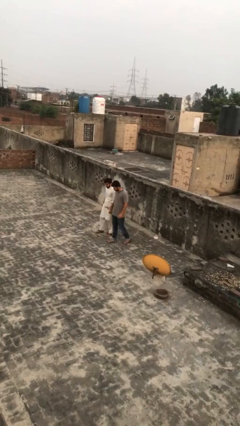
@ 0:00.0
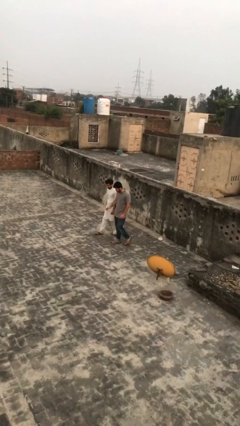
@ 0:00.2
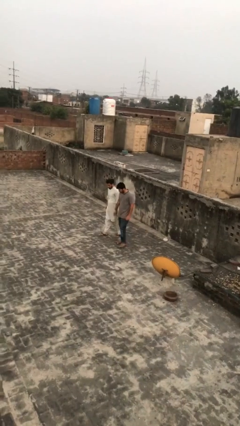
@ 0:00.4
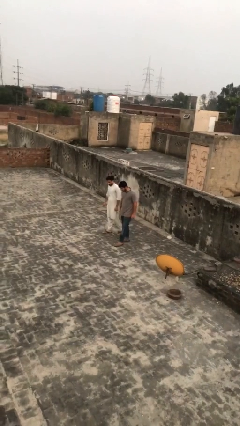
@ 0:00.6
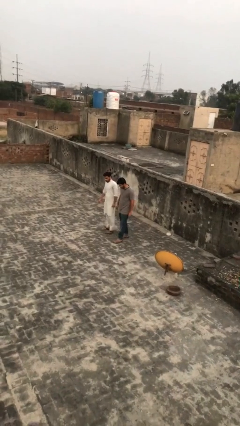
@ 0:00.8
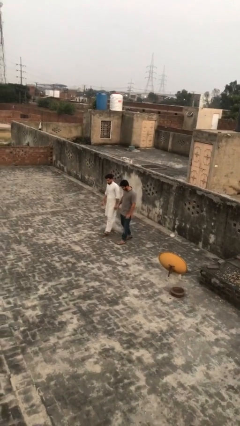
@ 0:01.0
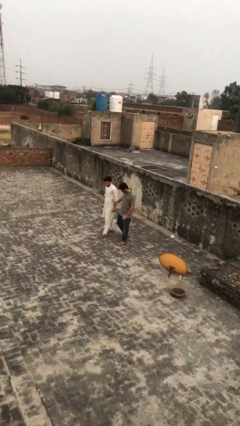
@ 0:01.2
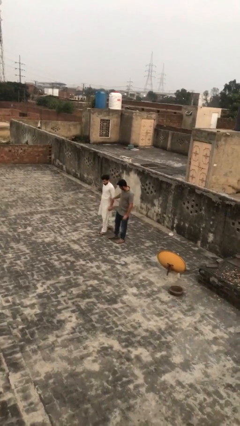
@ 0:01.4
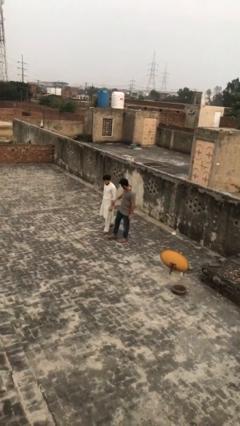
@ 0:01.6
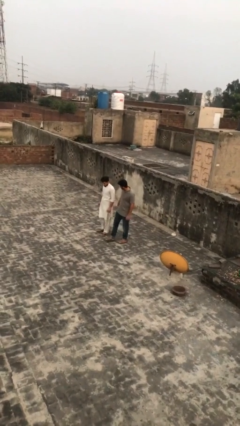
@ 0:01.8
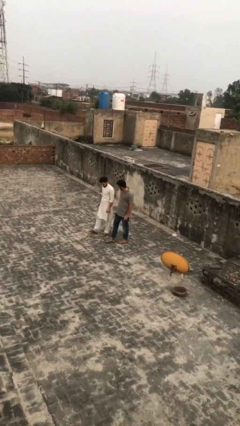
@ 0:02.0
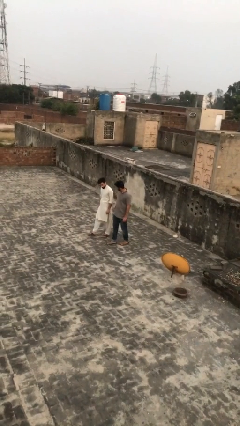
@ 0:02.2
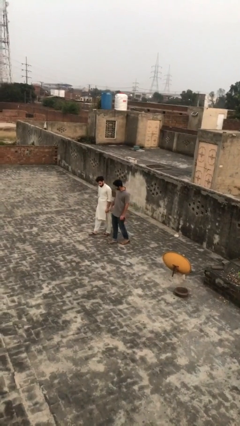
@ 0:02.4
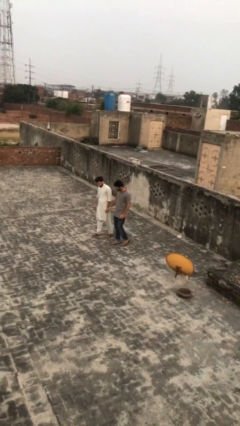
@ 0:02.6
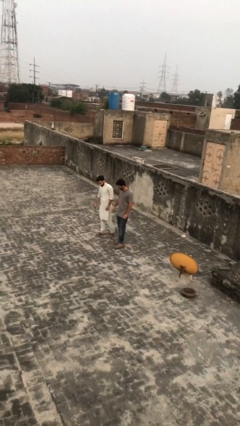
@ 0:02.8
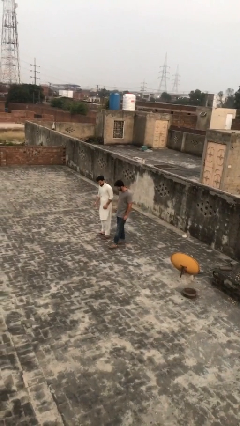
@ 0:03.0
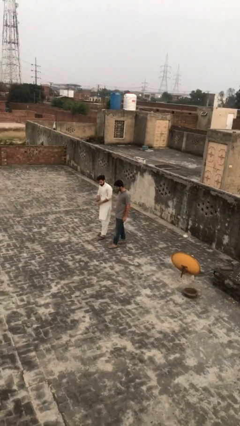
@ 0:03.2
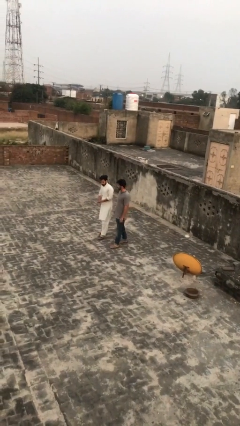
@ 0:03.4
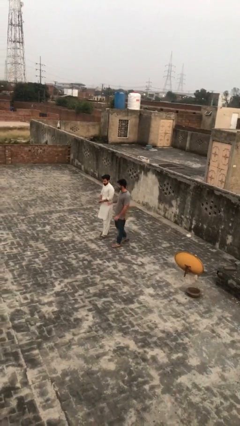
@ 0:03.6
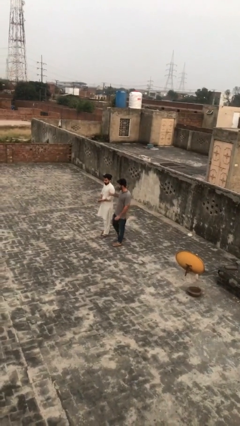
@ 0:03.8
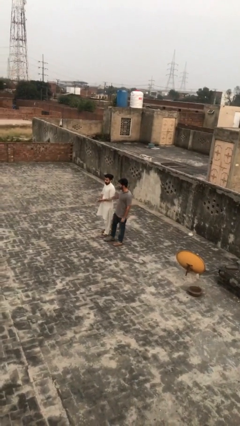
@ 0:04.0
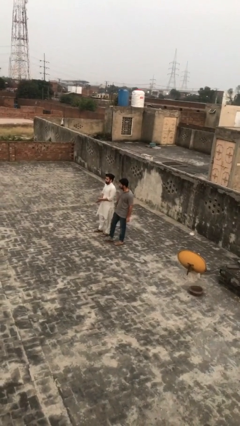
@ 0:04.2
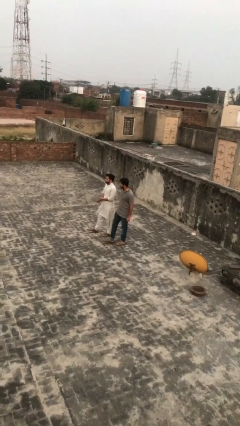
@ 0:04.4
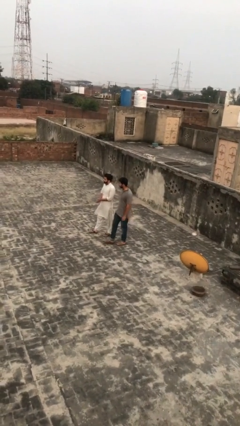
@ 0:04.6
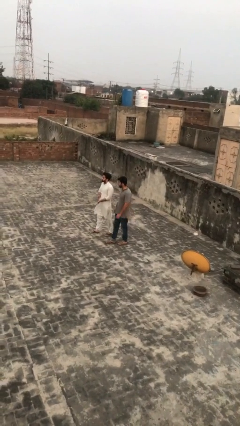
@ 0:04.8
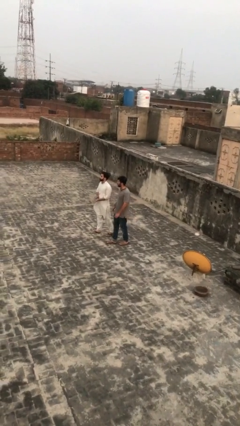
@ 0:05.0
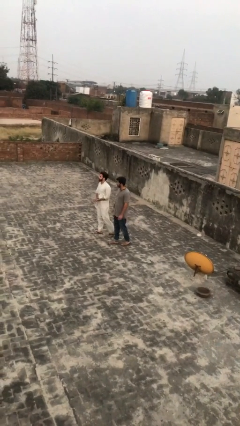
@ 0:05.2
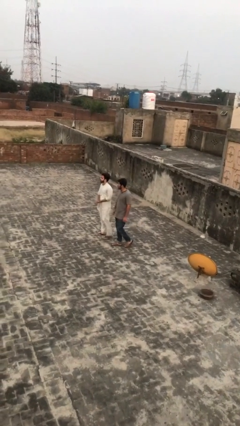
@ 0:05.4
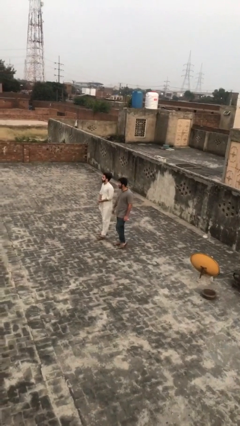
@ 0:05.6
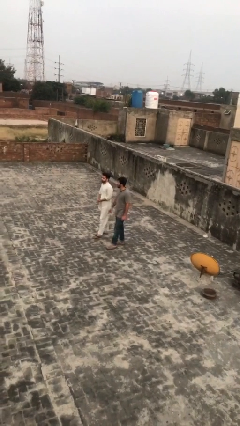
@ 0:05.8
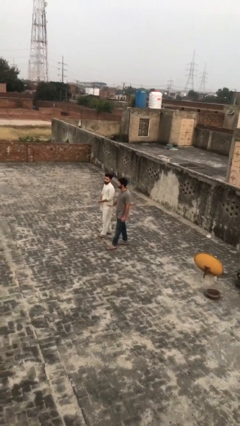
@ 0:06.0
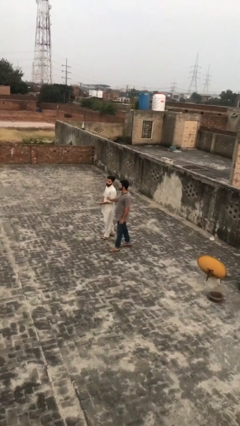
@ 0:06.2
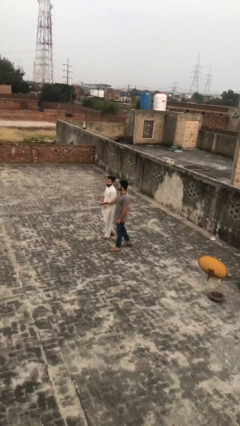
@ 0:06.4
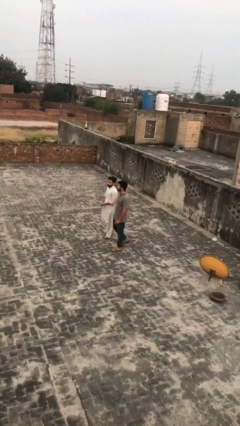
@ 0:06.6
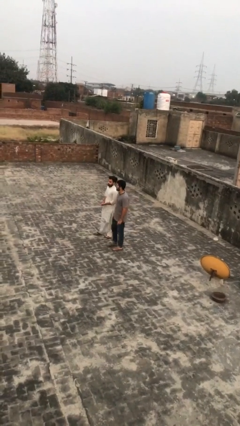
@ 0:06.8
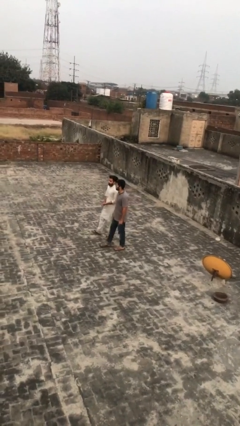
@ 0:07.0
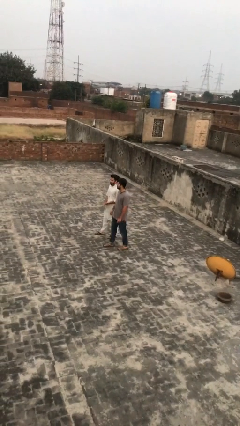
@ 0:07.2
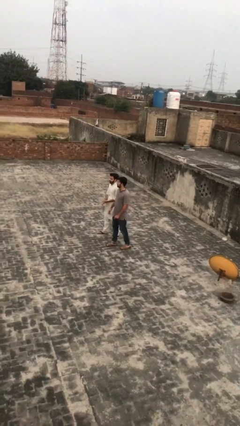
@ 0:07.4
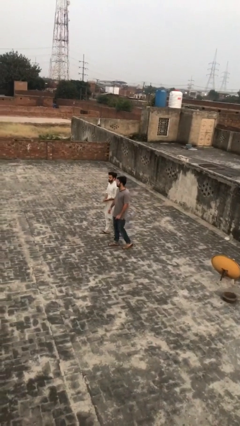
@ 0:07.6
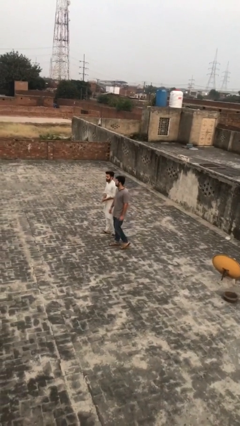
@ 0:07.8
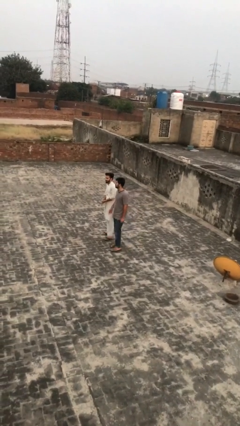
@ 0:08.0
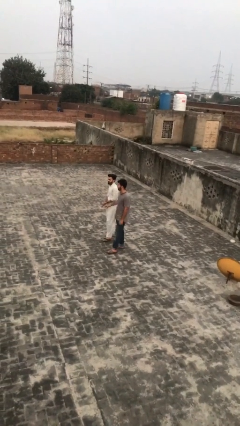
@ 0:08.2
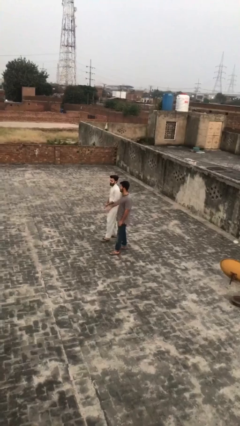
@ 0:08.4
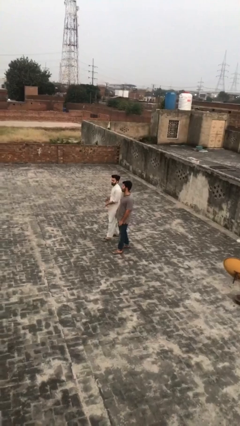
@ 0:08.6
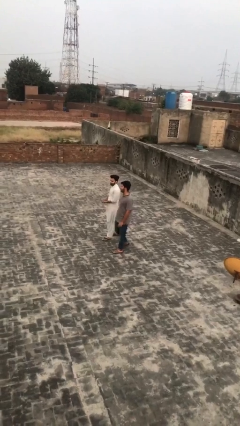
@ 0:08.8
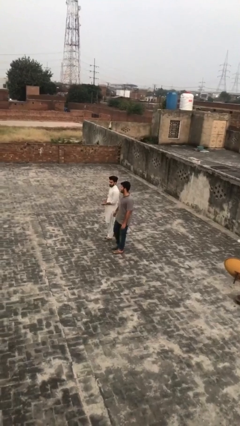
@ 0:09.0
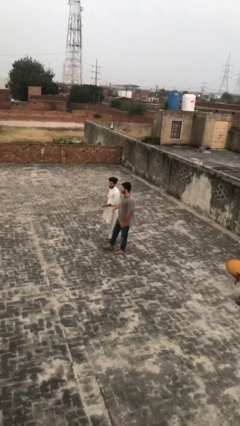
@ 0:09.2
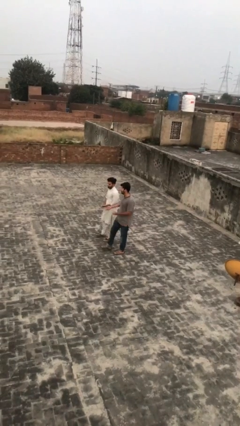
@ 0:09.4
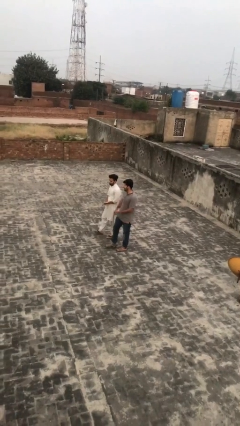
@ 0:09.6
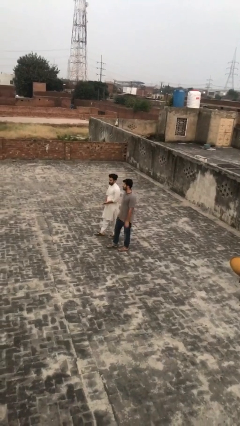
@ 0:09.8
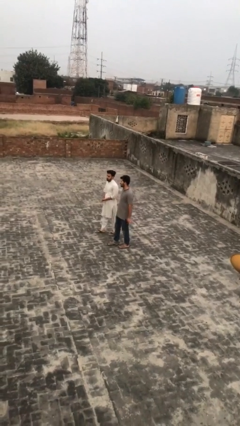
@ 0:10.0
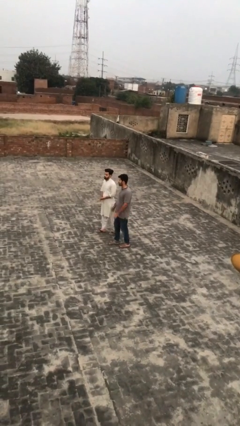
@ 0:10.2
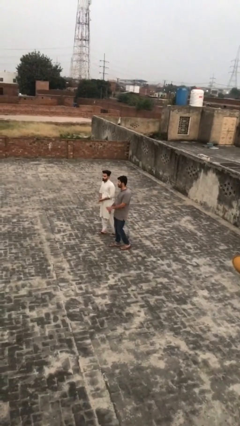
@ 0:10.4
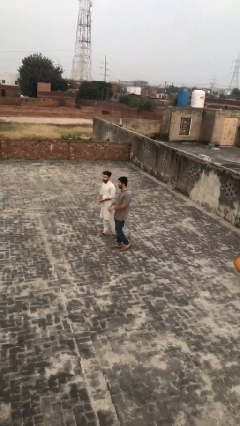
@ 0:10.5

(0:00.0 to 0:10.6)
person talks to person

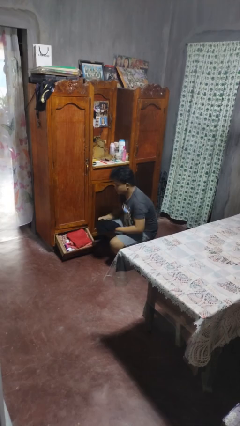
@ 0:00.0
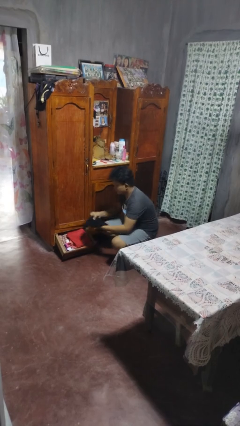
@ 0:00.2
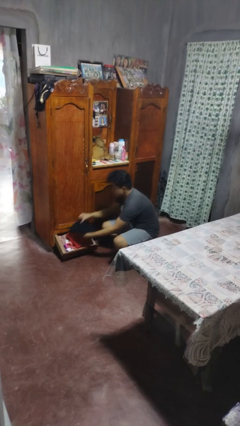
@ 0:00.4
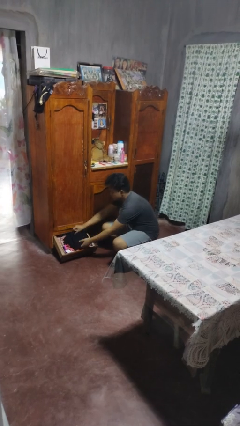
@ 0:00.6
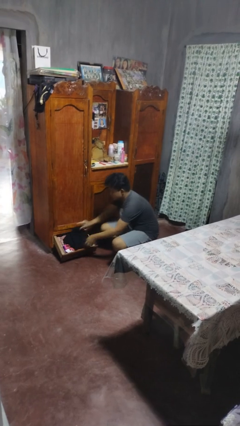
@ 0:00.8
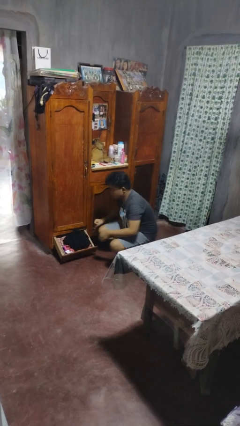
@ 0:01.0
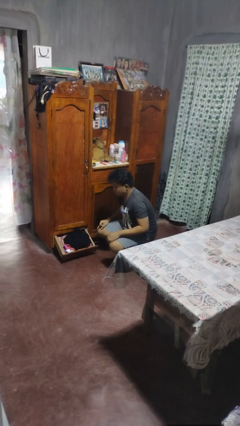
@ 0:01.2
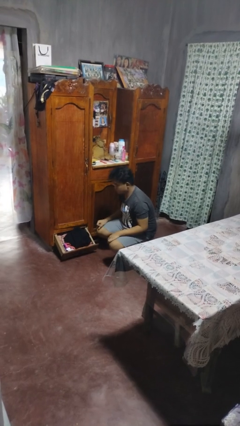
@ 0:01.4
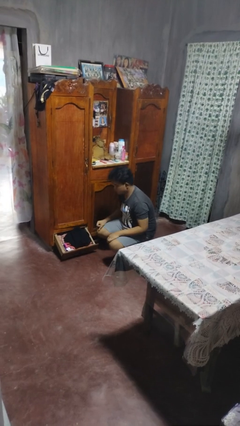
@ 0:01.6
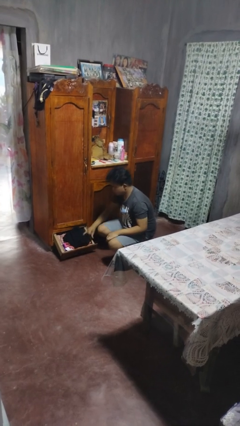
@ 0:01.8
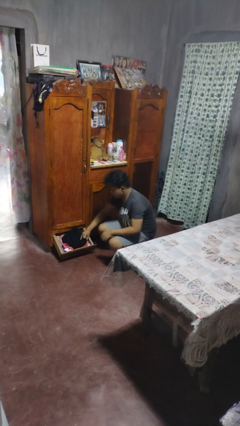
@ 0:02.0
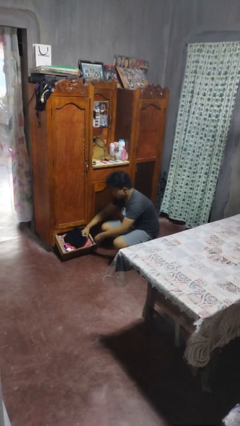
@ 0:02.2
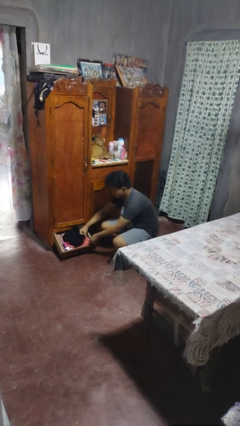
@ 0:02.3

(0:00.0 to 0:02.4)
person puts clothes into dresser

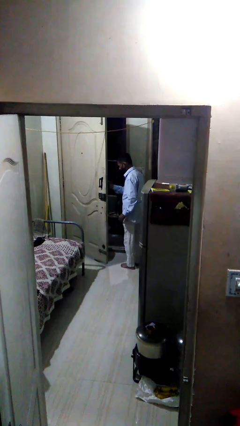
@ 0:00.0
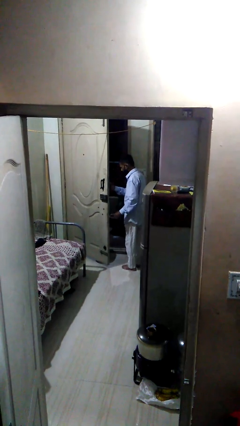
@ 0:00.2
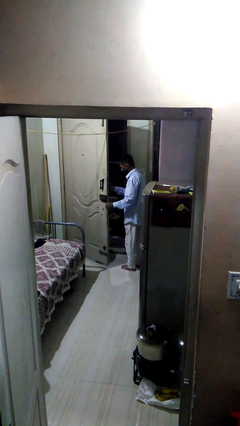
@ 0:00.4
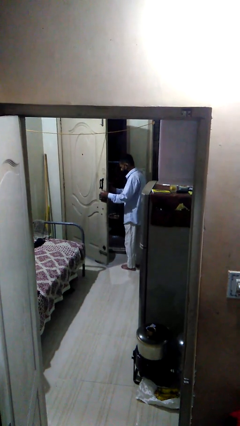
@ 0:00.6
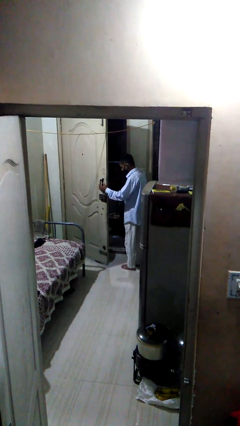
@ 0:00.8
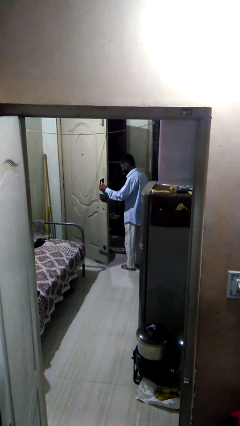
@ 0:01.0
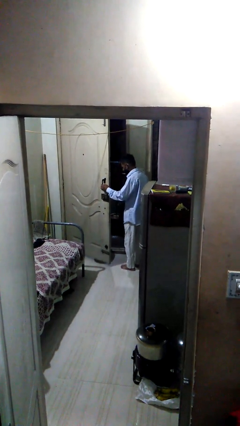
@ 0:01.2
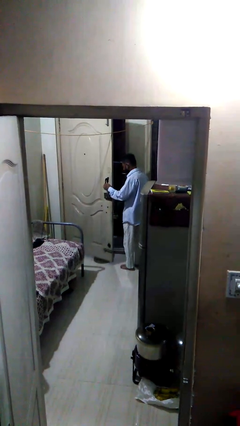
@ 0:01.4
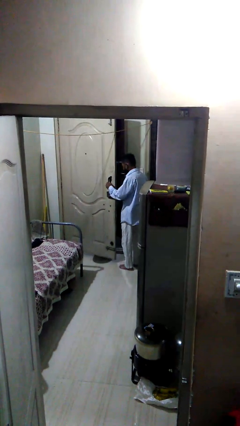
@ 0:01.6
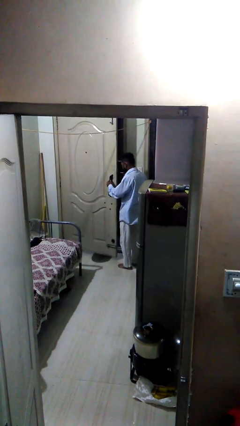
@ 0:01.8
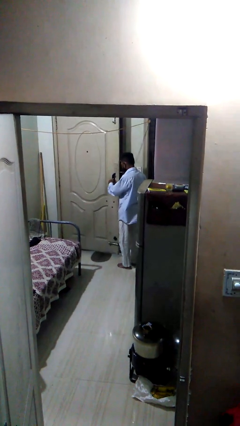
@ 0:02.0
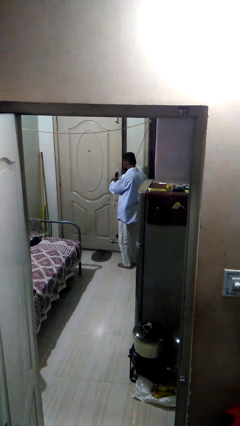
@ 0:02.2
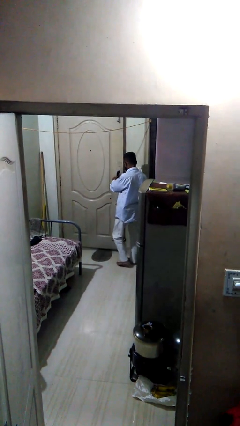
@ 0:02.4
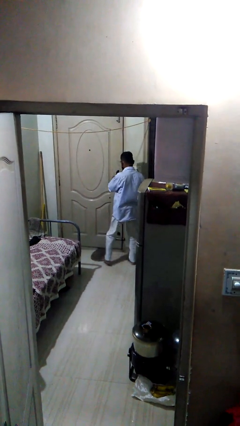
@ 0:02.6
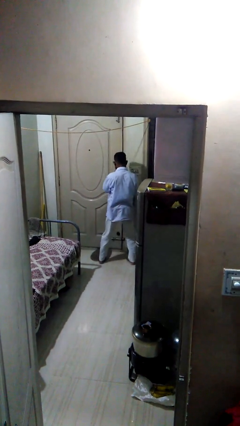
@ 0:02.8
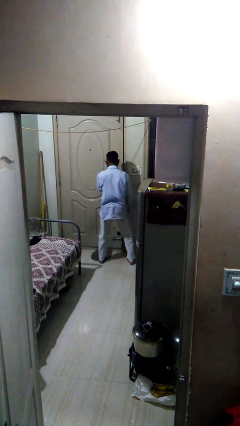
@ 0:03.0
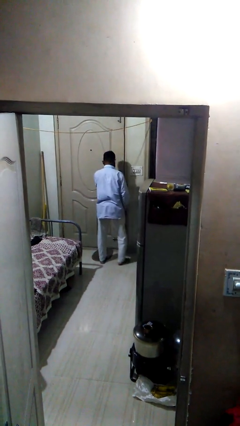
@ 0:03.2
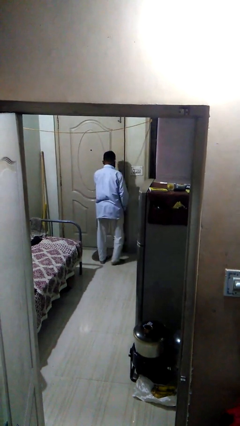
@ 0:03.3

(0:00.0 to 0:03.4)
person closes facility door

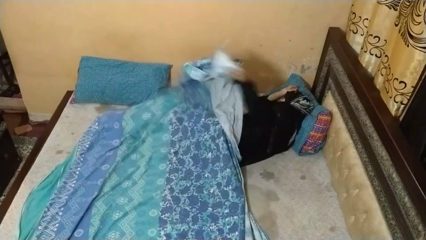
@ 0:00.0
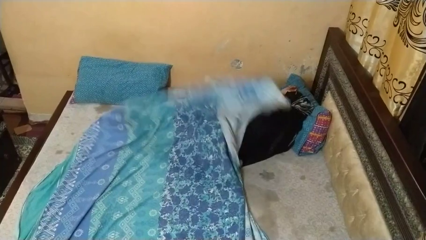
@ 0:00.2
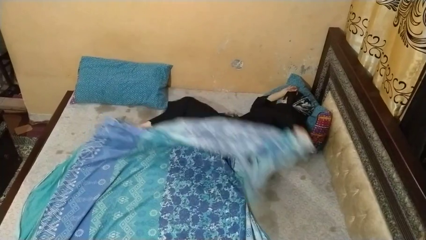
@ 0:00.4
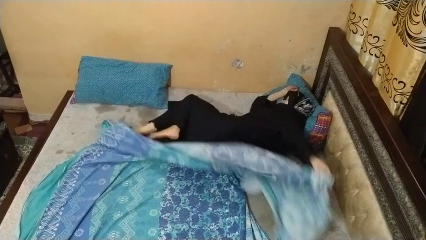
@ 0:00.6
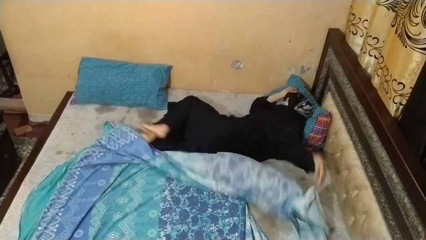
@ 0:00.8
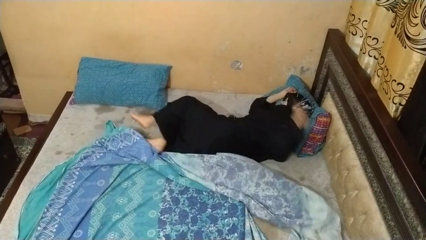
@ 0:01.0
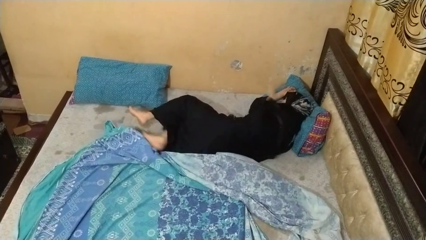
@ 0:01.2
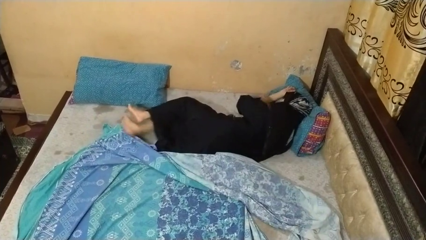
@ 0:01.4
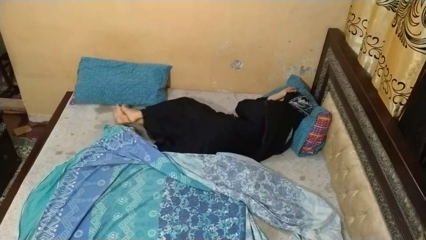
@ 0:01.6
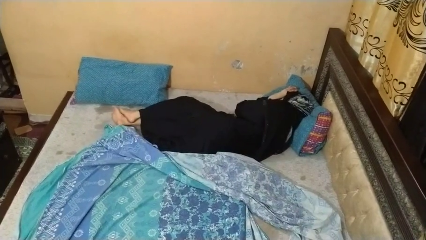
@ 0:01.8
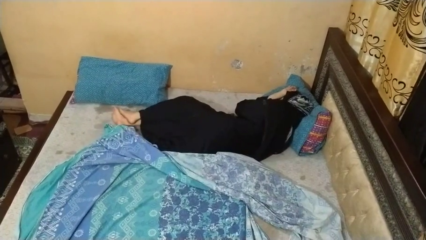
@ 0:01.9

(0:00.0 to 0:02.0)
person uncovers with bedsheets
